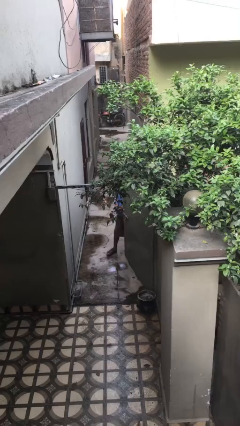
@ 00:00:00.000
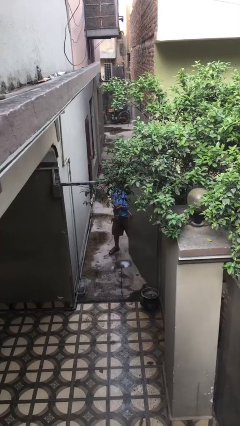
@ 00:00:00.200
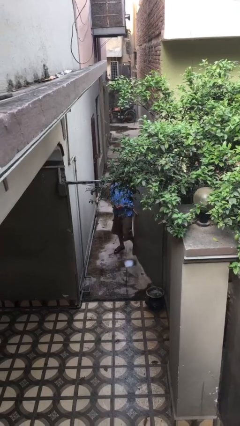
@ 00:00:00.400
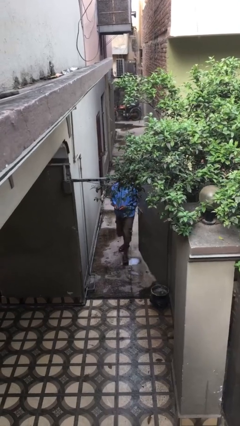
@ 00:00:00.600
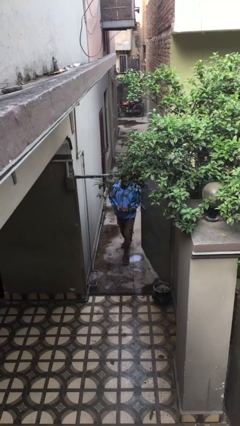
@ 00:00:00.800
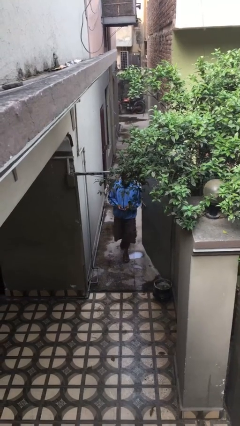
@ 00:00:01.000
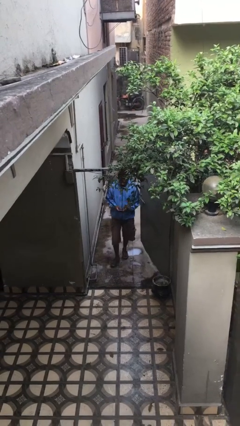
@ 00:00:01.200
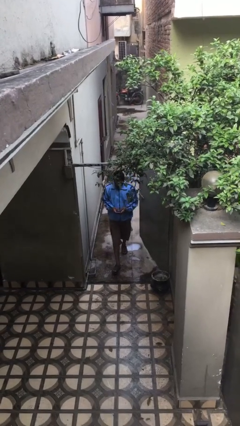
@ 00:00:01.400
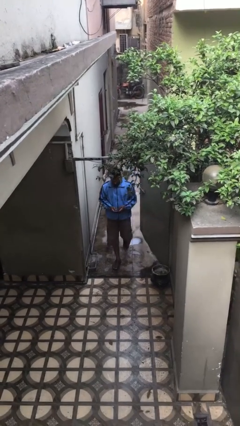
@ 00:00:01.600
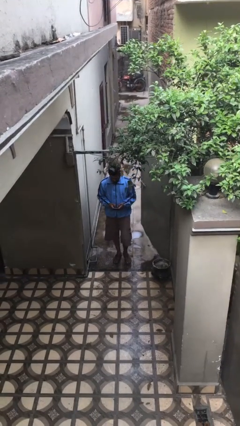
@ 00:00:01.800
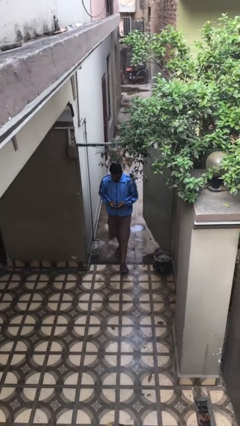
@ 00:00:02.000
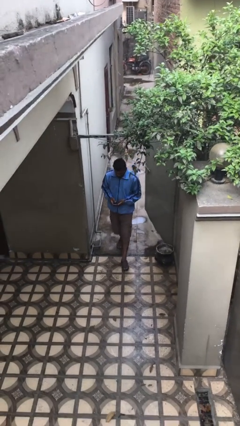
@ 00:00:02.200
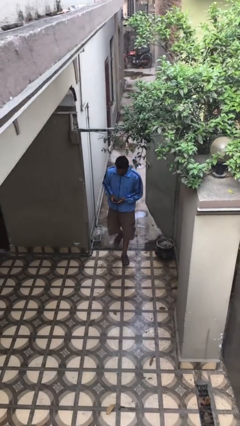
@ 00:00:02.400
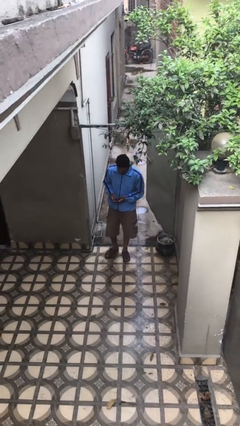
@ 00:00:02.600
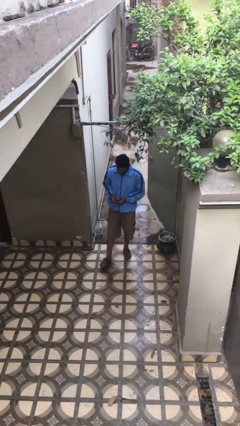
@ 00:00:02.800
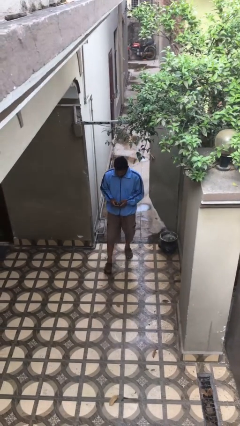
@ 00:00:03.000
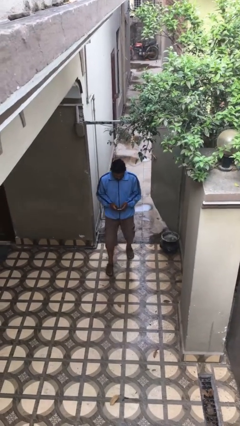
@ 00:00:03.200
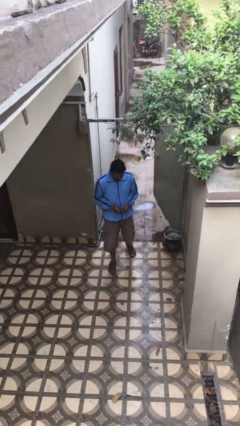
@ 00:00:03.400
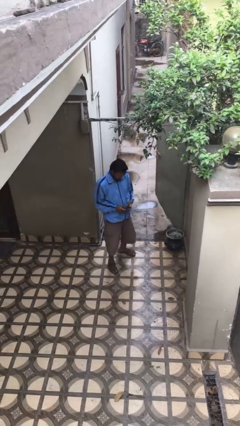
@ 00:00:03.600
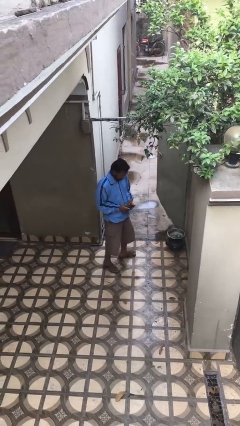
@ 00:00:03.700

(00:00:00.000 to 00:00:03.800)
person enters scene through structure

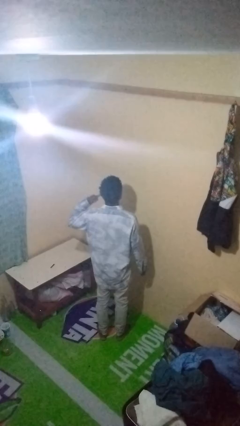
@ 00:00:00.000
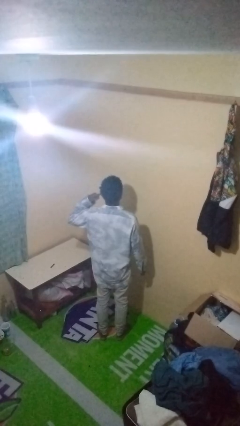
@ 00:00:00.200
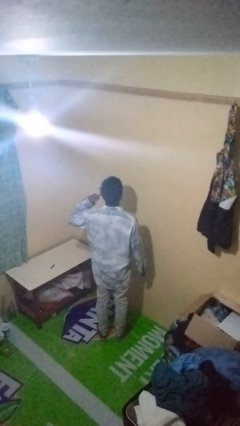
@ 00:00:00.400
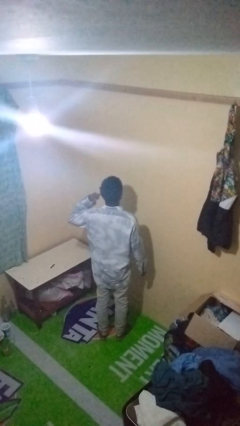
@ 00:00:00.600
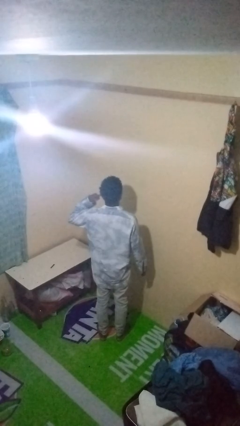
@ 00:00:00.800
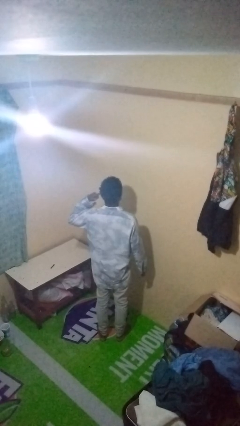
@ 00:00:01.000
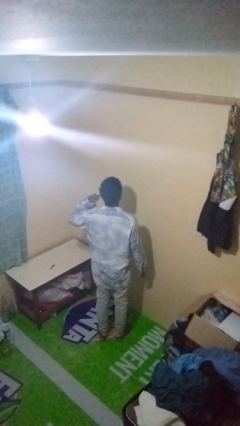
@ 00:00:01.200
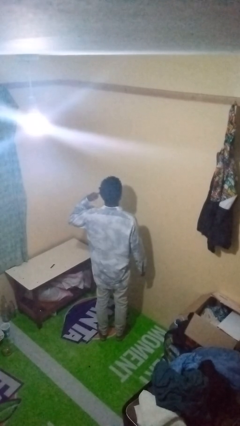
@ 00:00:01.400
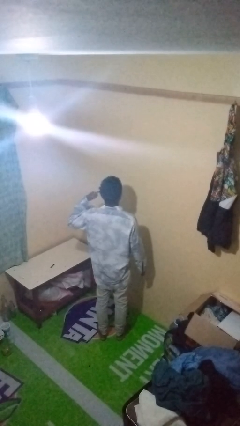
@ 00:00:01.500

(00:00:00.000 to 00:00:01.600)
person gestures listen closely

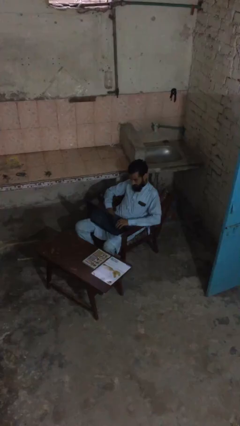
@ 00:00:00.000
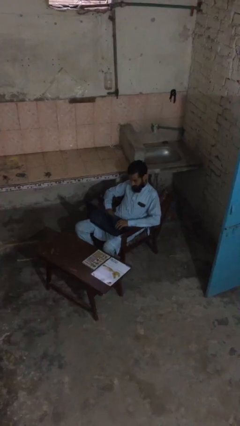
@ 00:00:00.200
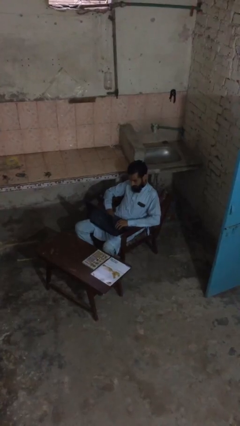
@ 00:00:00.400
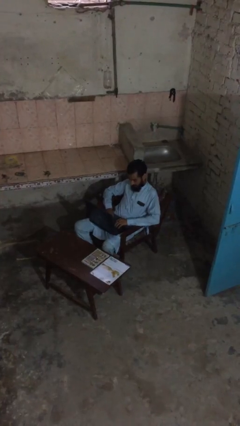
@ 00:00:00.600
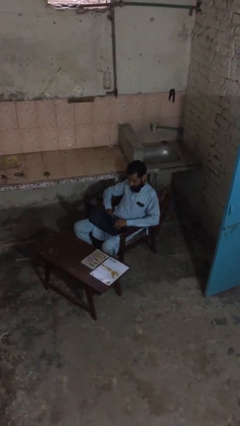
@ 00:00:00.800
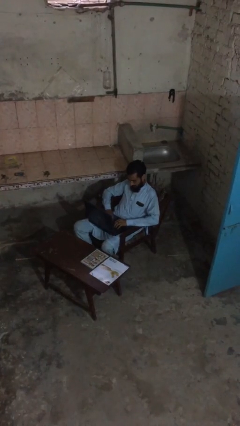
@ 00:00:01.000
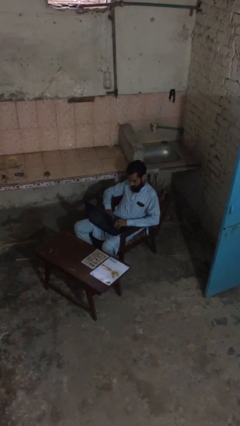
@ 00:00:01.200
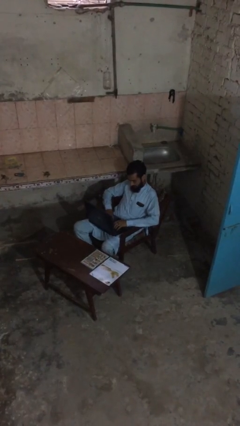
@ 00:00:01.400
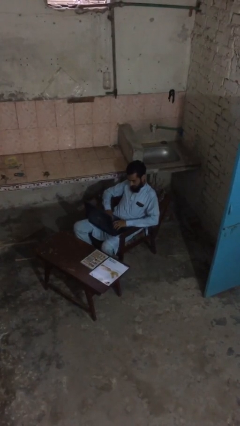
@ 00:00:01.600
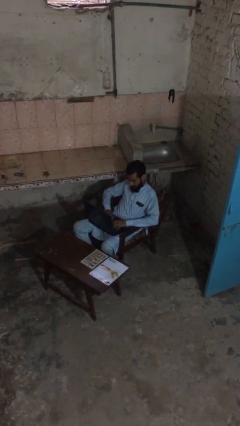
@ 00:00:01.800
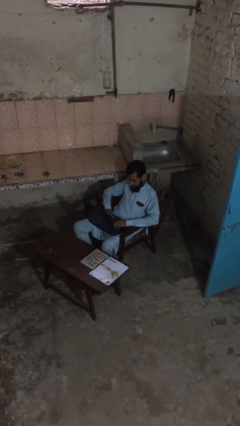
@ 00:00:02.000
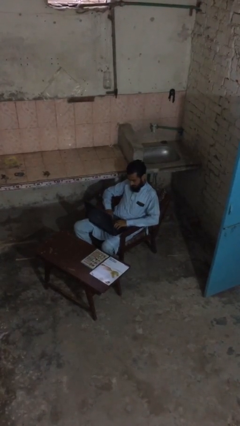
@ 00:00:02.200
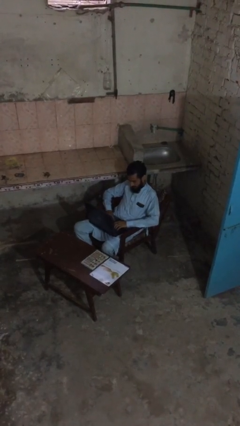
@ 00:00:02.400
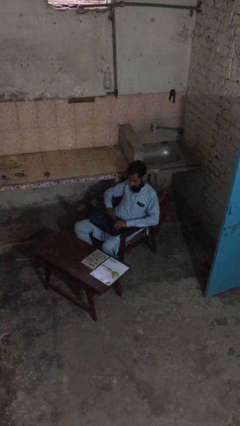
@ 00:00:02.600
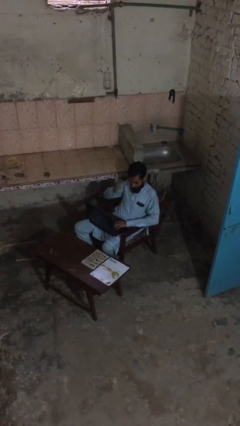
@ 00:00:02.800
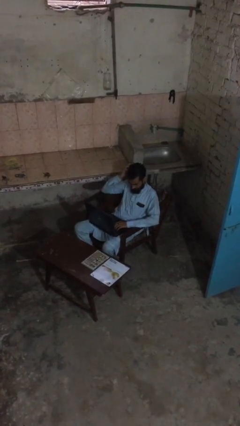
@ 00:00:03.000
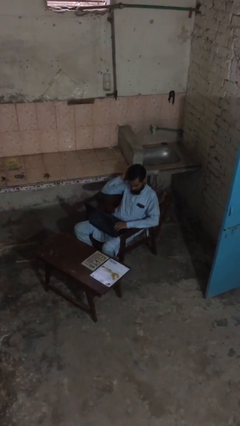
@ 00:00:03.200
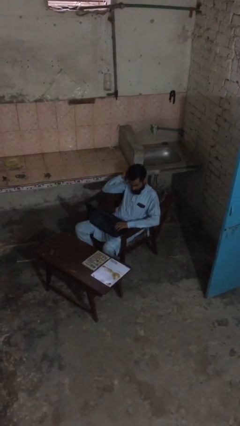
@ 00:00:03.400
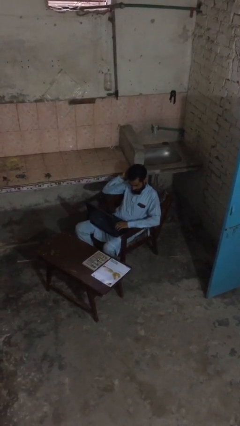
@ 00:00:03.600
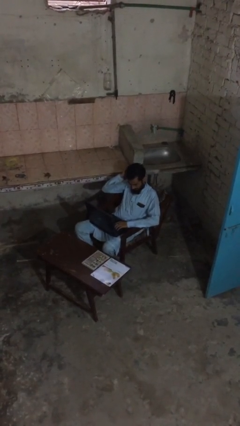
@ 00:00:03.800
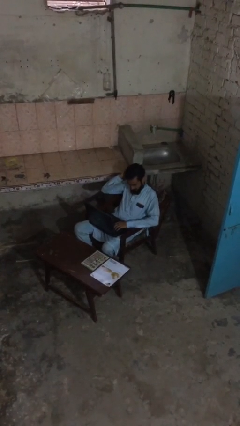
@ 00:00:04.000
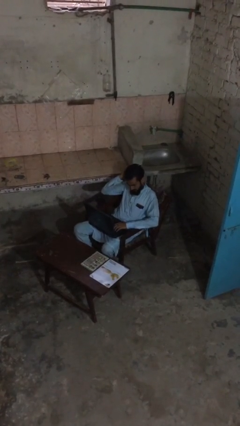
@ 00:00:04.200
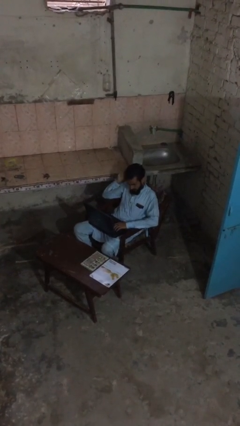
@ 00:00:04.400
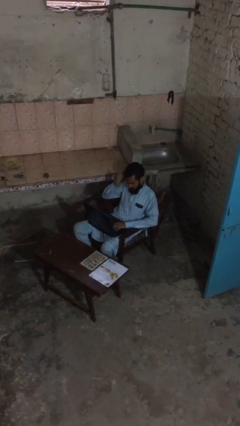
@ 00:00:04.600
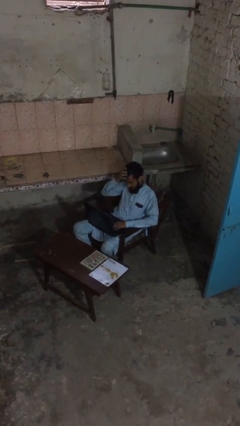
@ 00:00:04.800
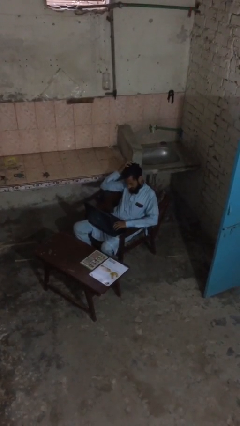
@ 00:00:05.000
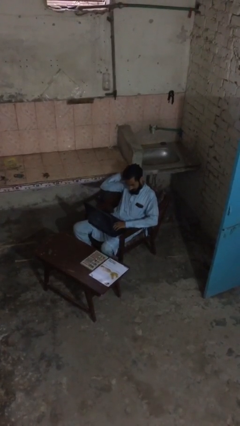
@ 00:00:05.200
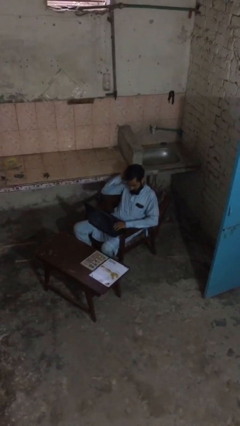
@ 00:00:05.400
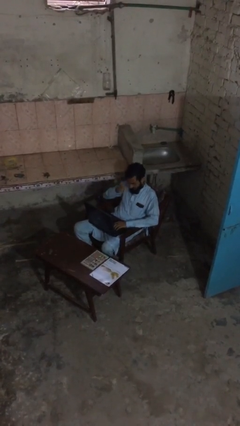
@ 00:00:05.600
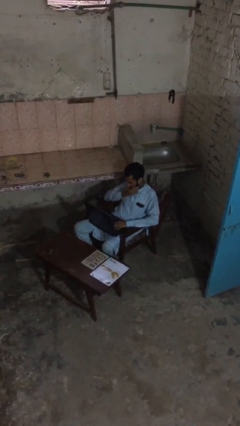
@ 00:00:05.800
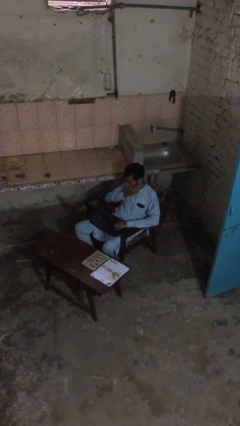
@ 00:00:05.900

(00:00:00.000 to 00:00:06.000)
person interacts with laptop

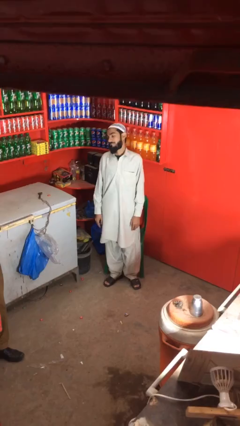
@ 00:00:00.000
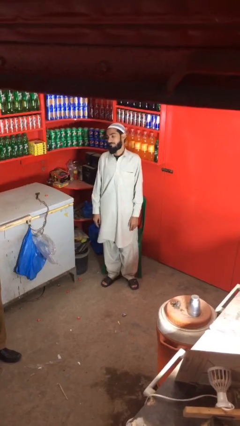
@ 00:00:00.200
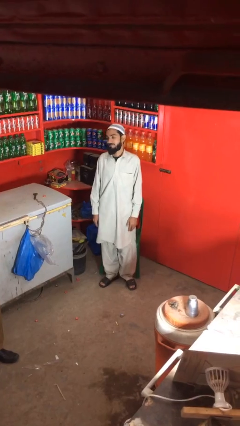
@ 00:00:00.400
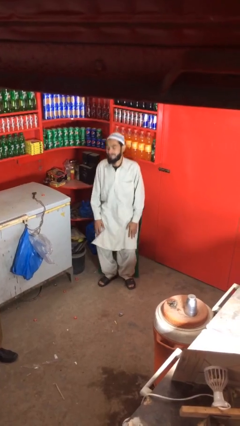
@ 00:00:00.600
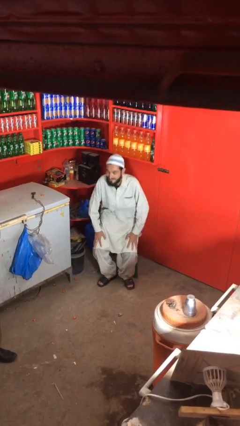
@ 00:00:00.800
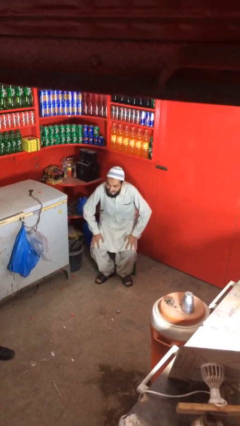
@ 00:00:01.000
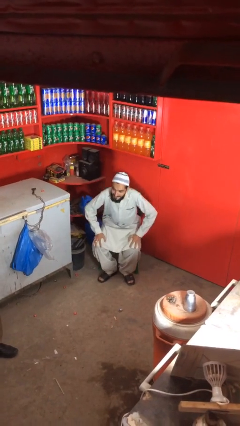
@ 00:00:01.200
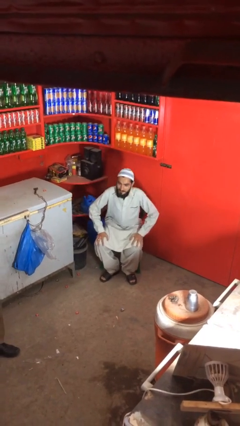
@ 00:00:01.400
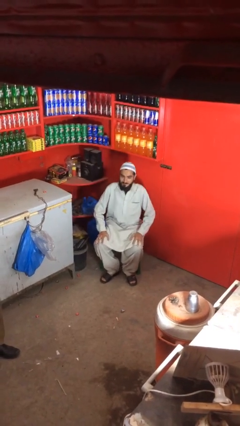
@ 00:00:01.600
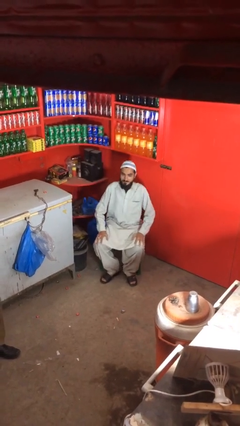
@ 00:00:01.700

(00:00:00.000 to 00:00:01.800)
person sits down

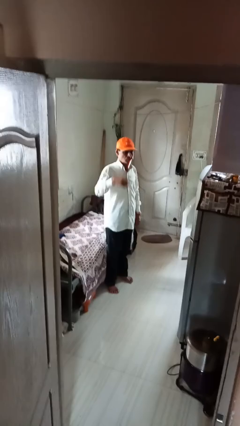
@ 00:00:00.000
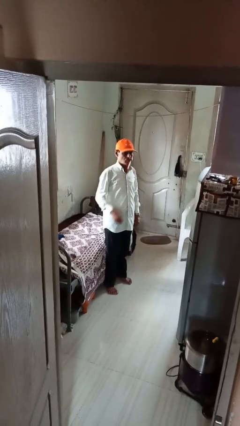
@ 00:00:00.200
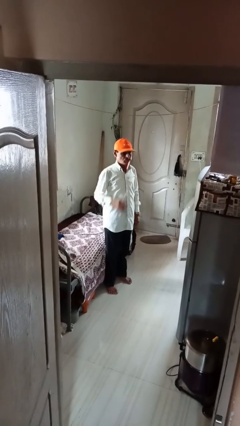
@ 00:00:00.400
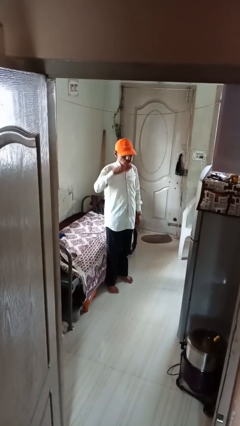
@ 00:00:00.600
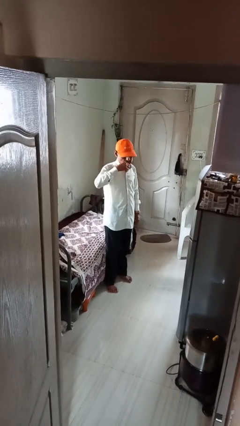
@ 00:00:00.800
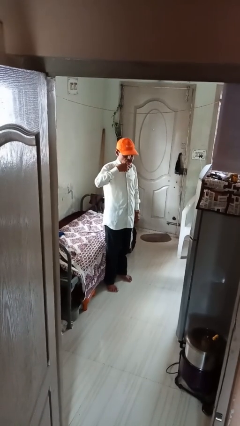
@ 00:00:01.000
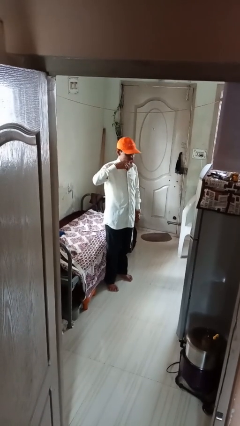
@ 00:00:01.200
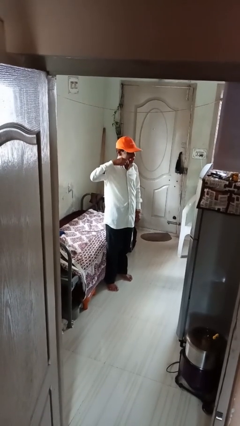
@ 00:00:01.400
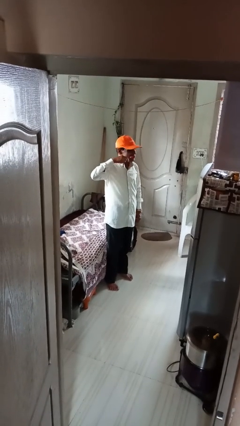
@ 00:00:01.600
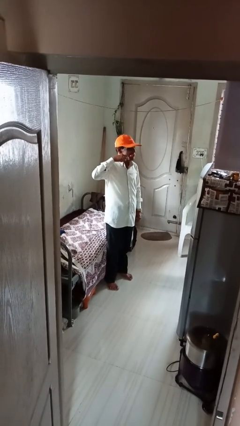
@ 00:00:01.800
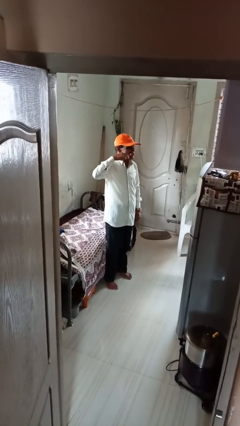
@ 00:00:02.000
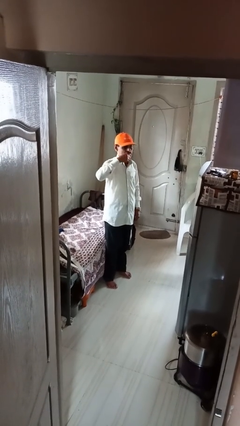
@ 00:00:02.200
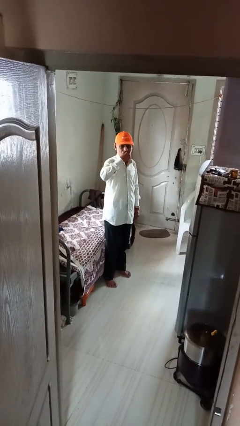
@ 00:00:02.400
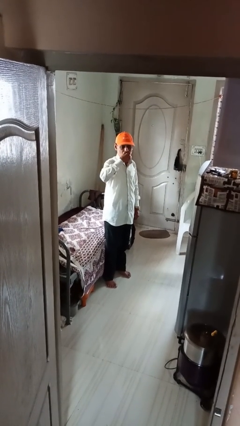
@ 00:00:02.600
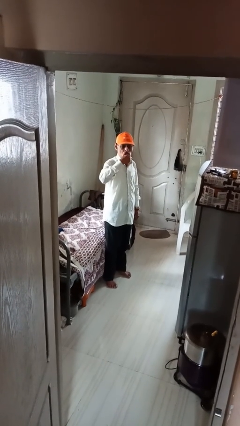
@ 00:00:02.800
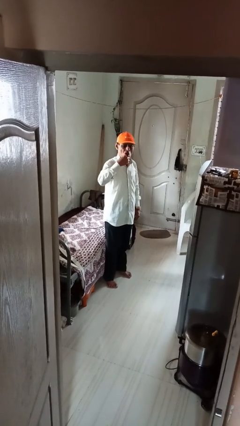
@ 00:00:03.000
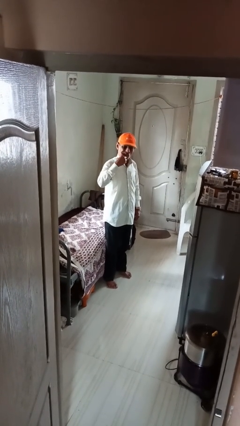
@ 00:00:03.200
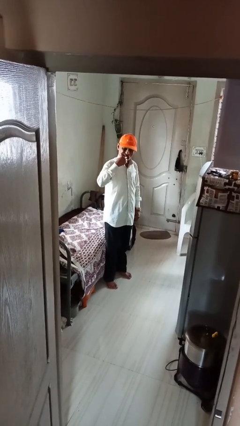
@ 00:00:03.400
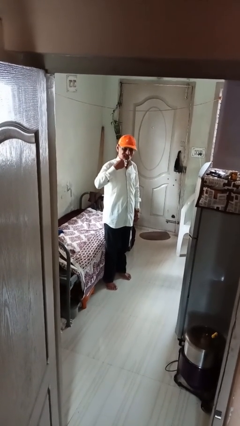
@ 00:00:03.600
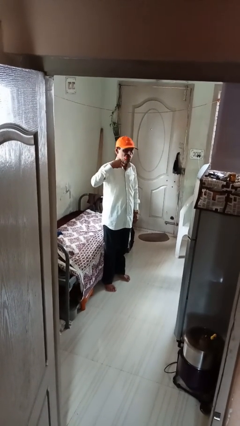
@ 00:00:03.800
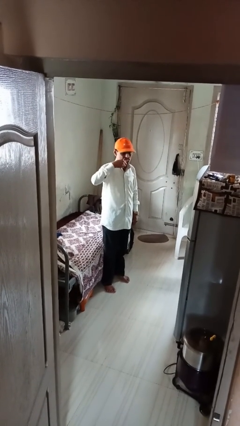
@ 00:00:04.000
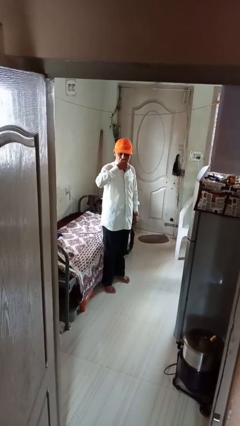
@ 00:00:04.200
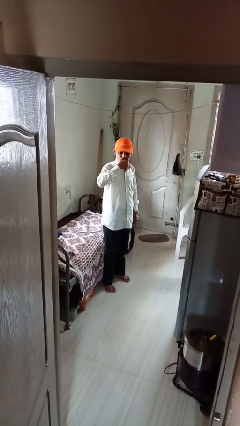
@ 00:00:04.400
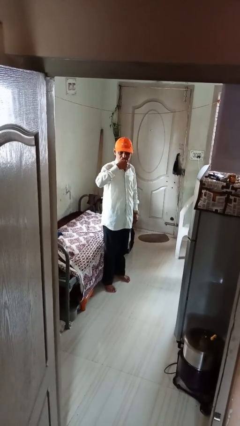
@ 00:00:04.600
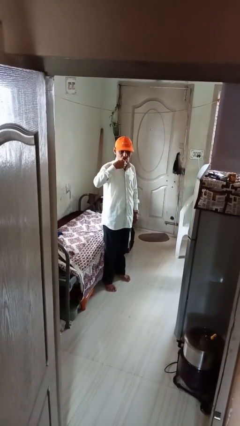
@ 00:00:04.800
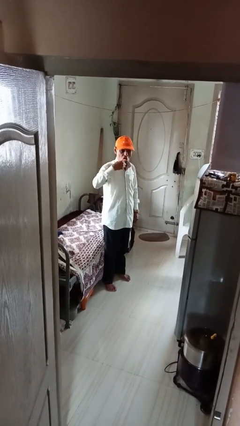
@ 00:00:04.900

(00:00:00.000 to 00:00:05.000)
person brushes teeth
